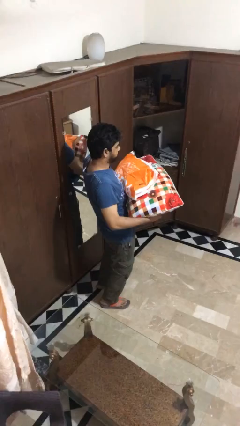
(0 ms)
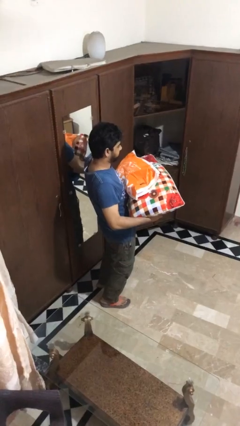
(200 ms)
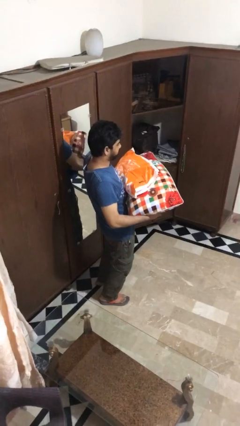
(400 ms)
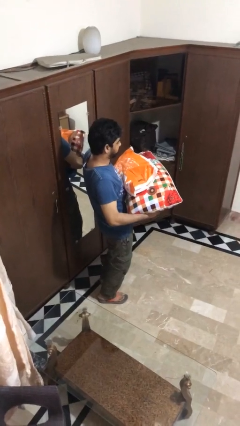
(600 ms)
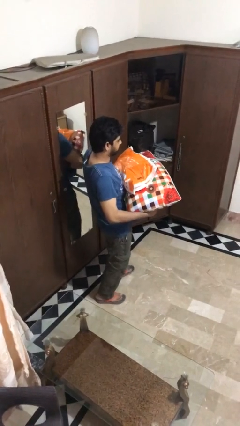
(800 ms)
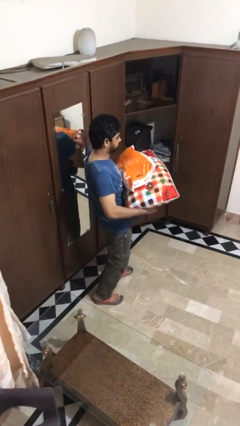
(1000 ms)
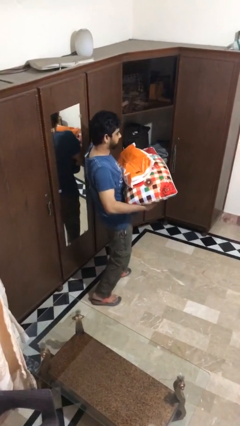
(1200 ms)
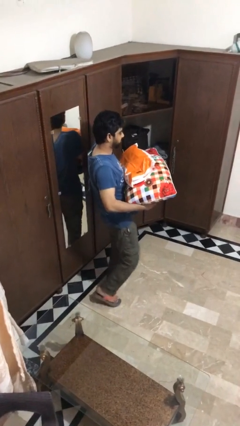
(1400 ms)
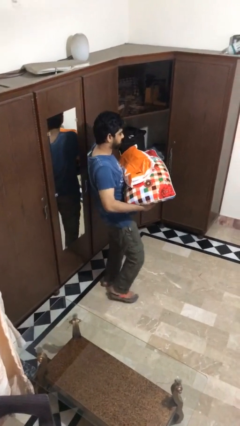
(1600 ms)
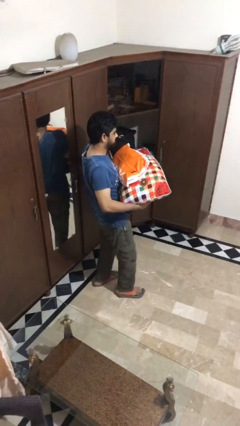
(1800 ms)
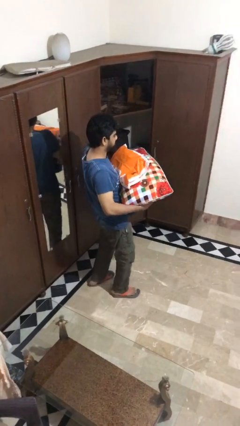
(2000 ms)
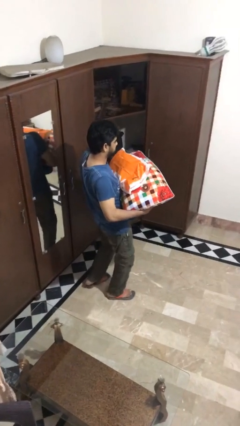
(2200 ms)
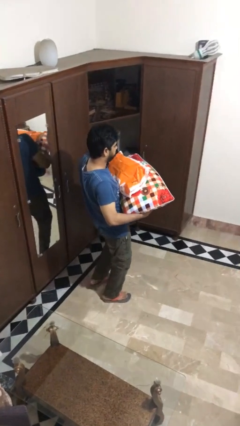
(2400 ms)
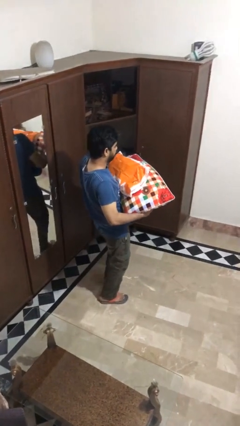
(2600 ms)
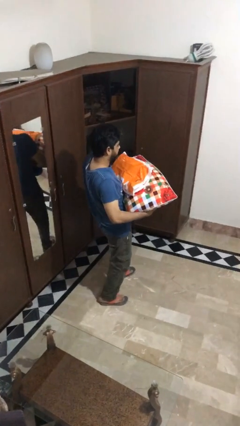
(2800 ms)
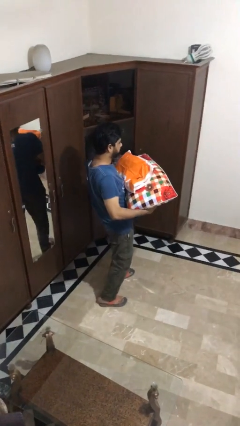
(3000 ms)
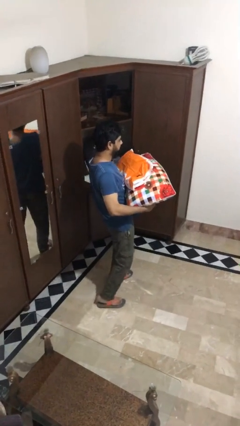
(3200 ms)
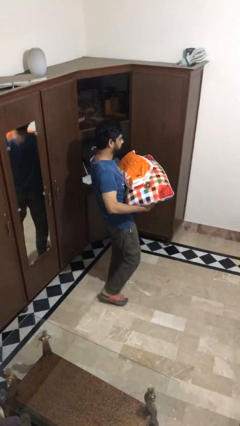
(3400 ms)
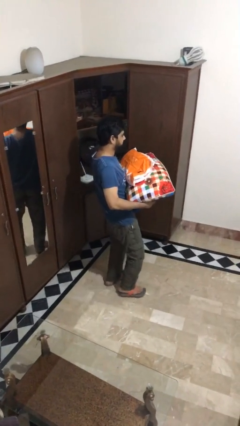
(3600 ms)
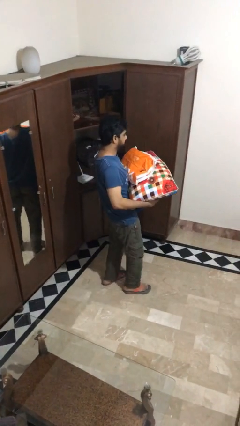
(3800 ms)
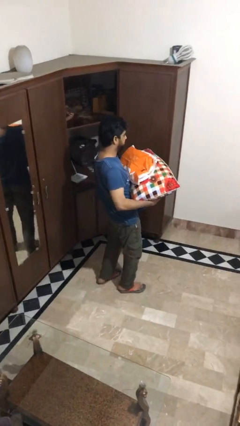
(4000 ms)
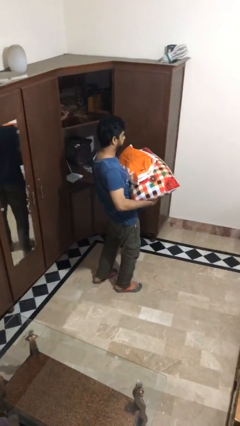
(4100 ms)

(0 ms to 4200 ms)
person carries heavy object

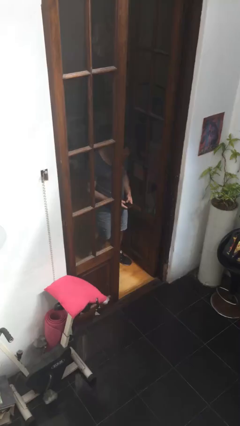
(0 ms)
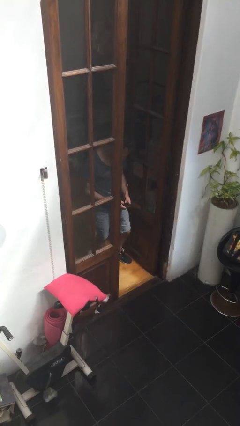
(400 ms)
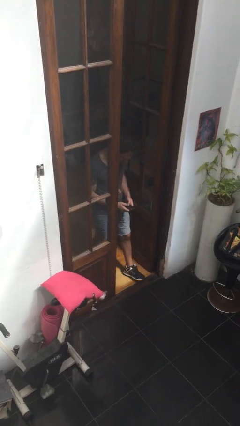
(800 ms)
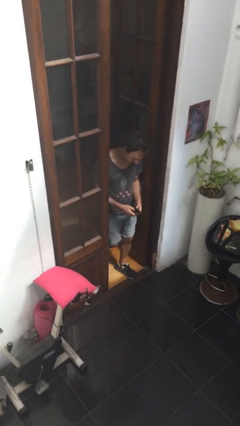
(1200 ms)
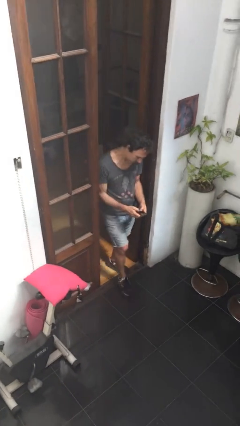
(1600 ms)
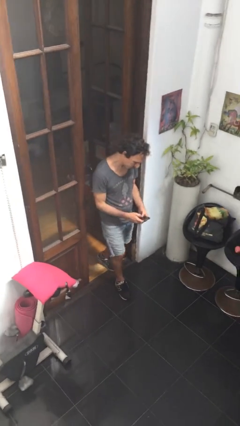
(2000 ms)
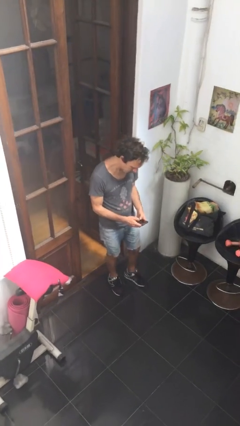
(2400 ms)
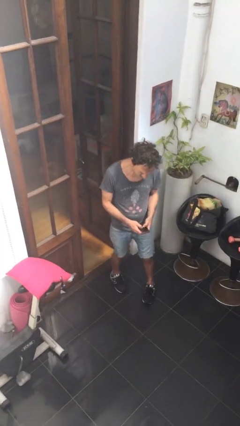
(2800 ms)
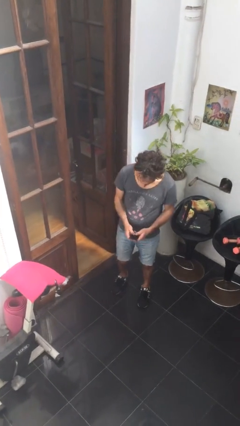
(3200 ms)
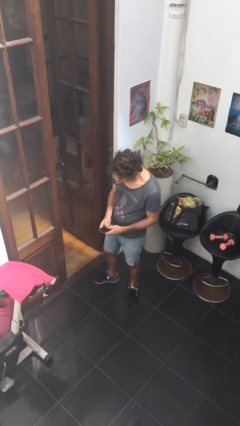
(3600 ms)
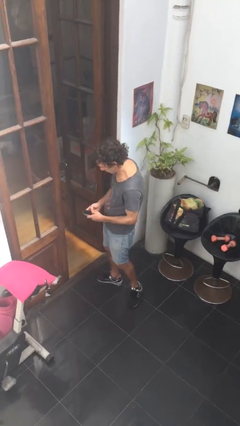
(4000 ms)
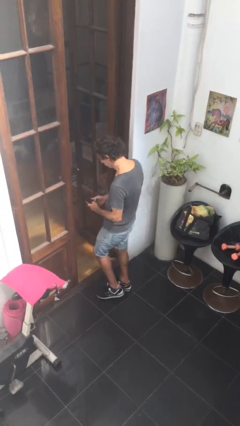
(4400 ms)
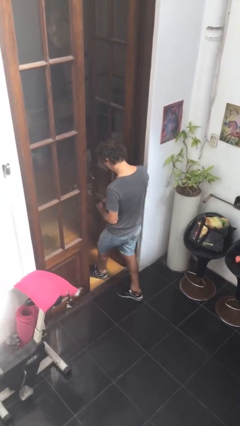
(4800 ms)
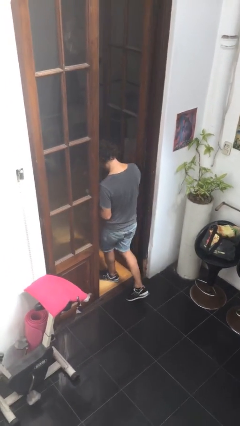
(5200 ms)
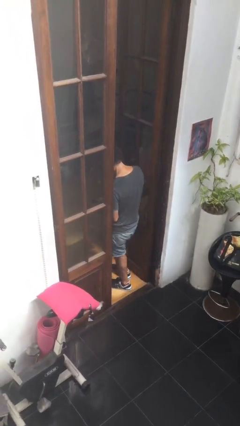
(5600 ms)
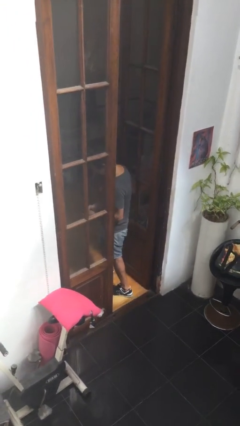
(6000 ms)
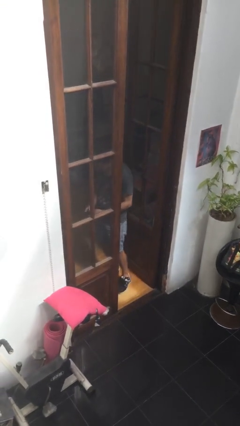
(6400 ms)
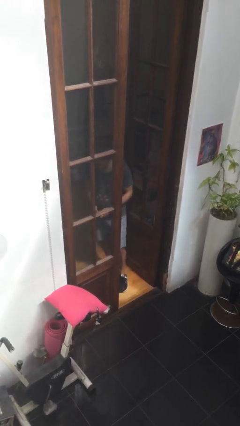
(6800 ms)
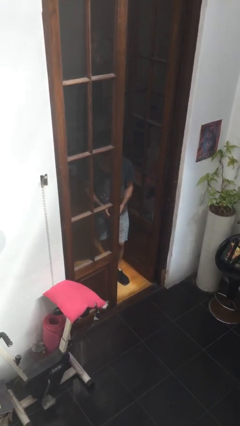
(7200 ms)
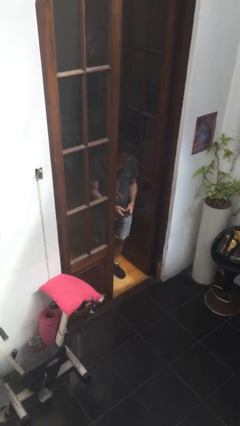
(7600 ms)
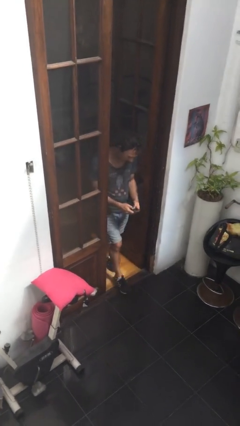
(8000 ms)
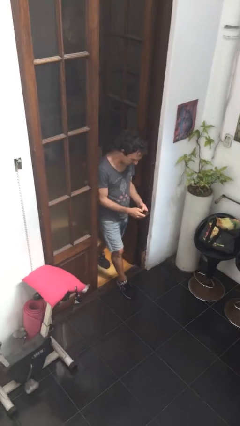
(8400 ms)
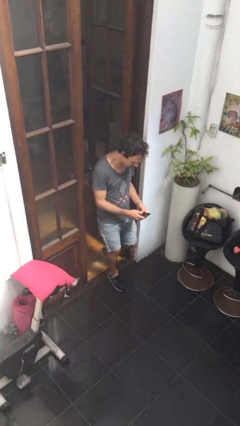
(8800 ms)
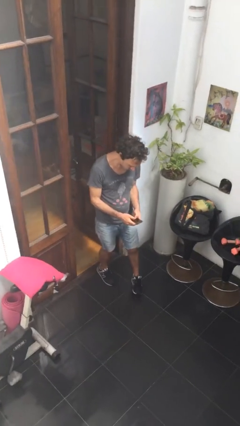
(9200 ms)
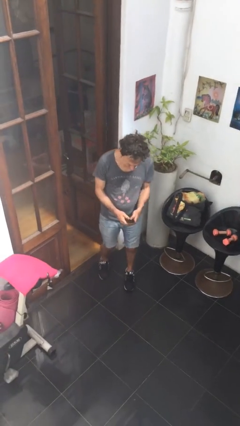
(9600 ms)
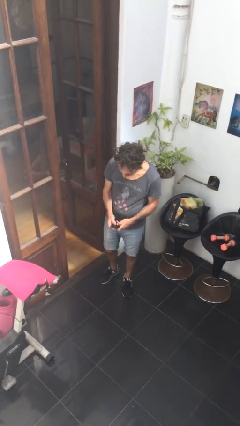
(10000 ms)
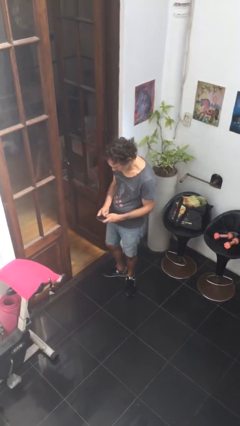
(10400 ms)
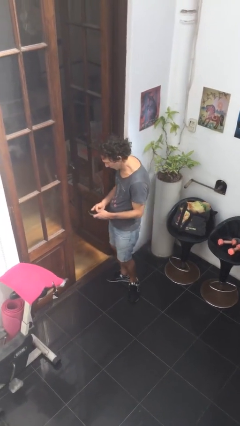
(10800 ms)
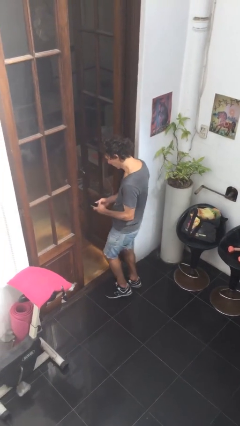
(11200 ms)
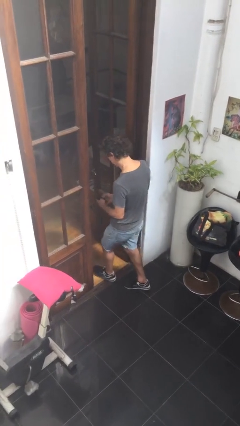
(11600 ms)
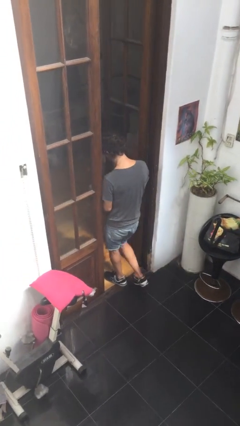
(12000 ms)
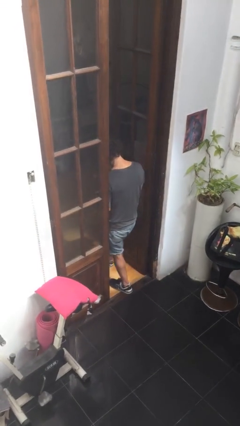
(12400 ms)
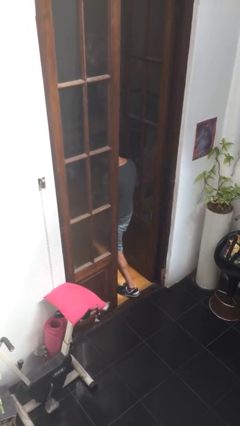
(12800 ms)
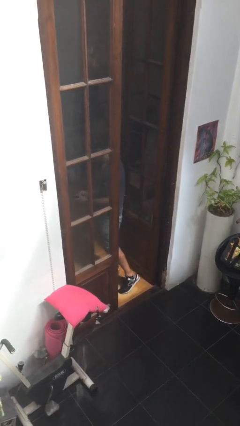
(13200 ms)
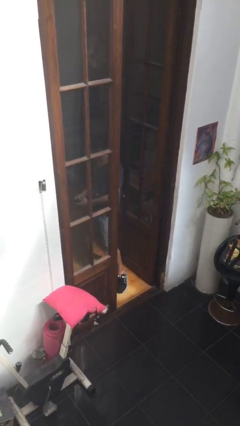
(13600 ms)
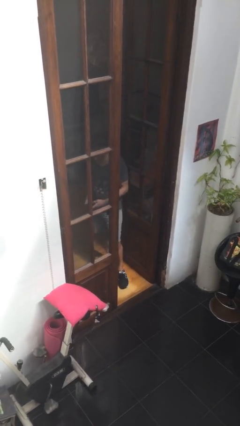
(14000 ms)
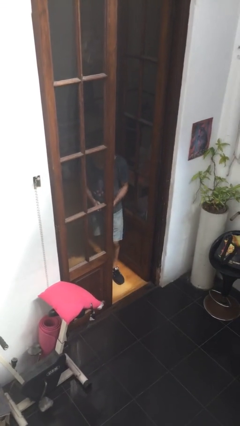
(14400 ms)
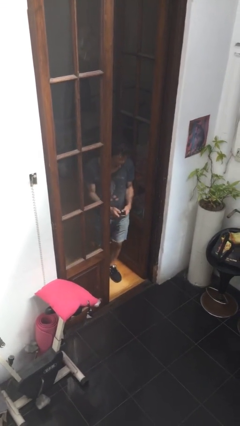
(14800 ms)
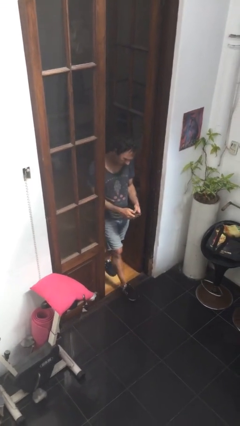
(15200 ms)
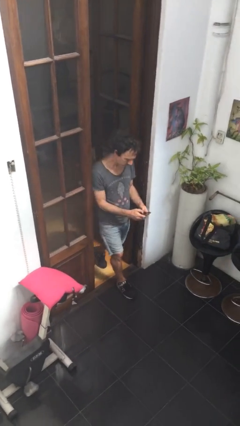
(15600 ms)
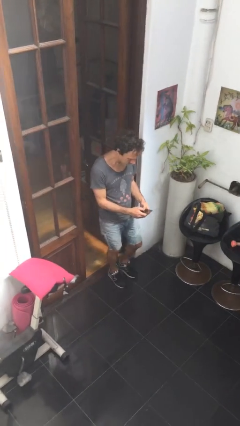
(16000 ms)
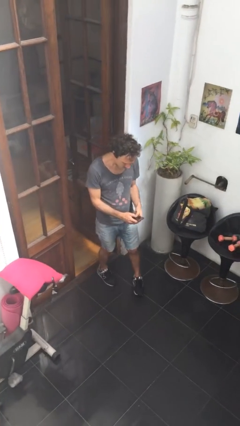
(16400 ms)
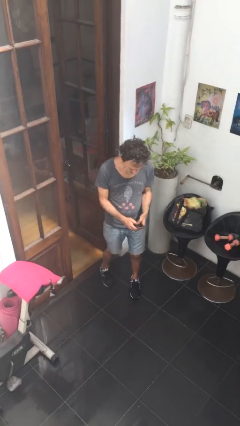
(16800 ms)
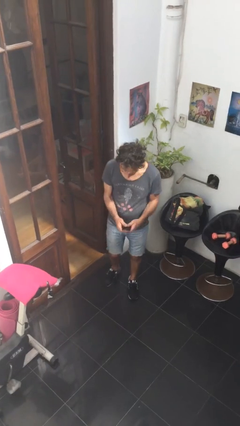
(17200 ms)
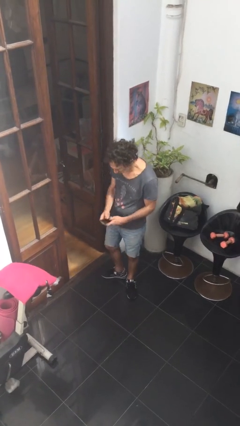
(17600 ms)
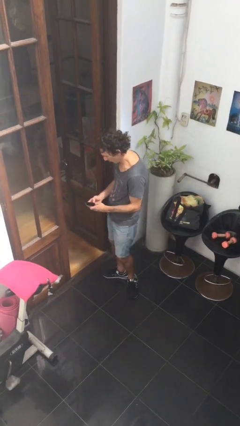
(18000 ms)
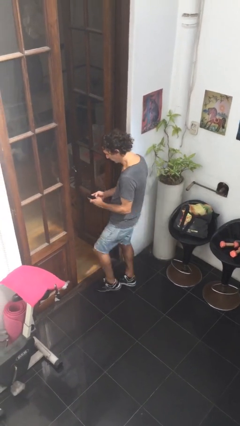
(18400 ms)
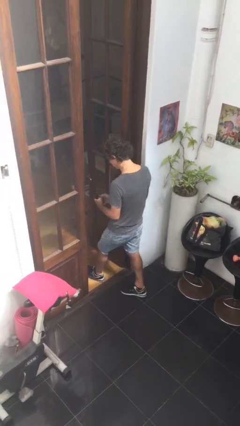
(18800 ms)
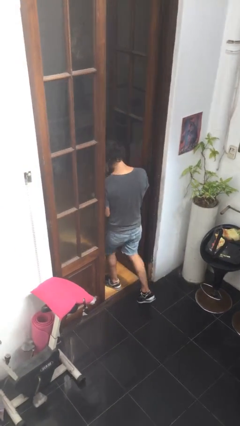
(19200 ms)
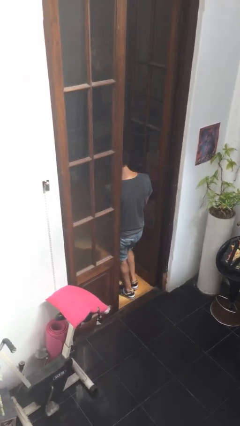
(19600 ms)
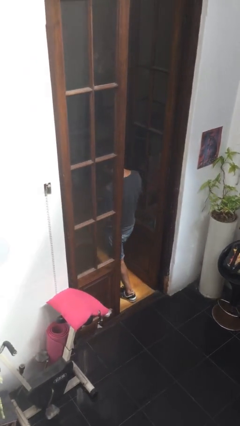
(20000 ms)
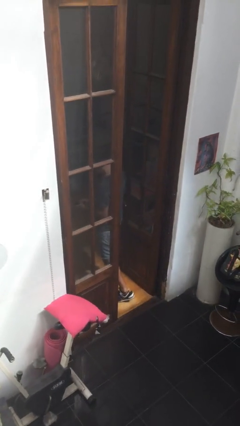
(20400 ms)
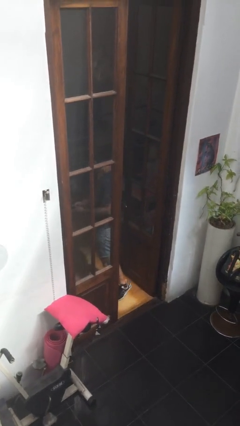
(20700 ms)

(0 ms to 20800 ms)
person texts on phone

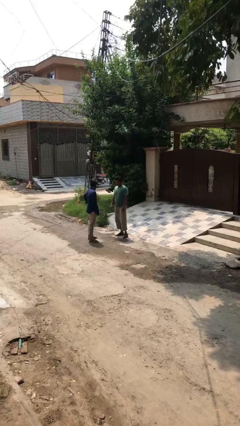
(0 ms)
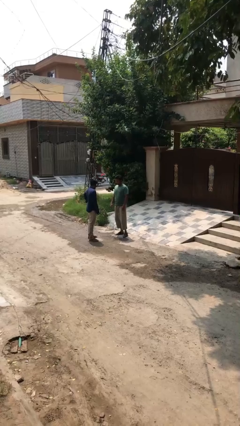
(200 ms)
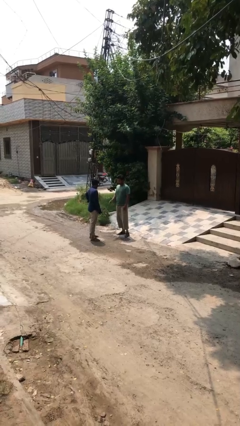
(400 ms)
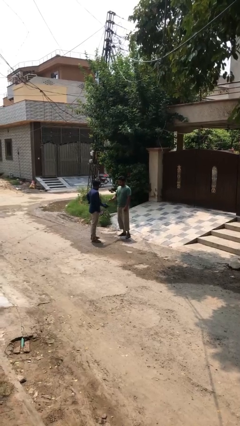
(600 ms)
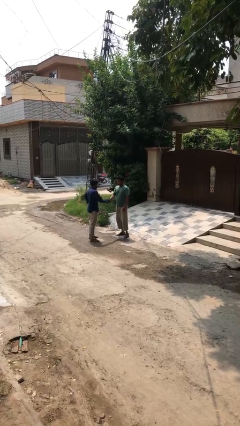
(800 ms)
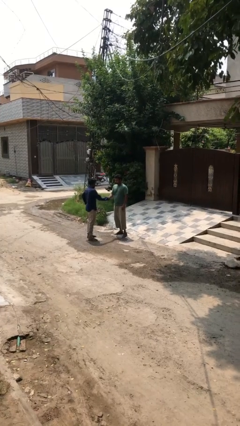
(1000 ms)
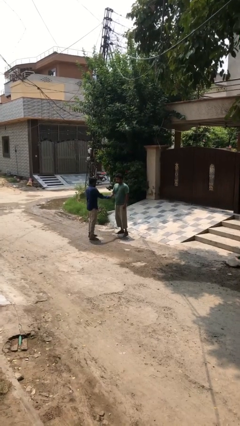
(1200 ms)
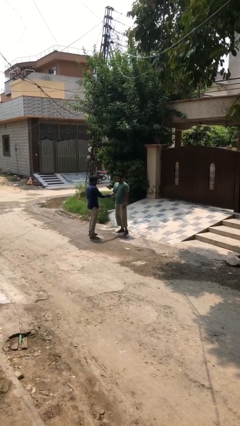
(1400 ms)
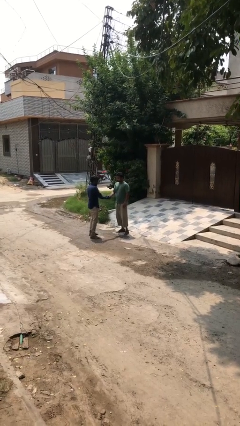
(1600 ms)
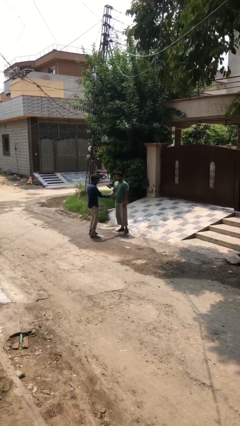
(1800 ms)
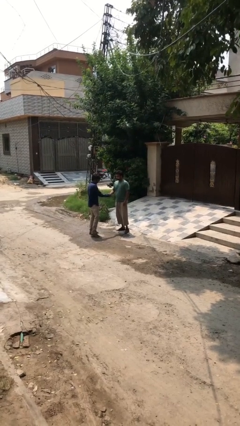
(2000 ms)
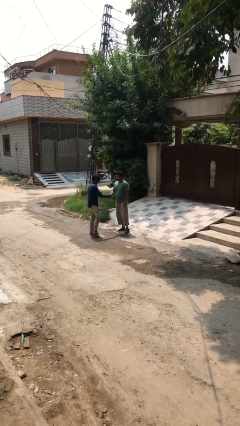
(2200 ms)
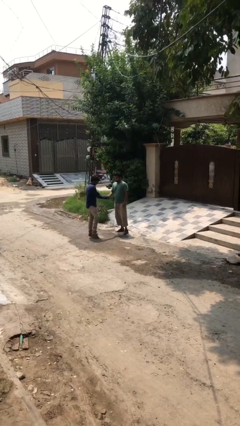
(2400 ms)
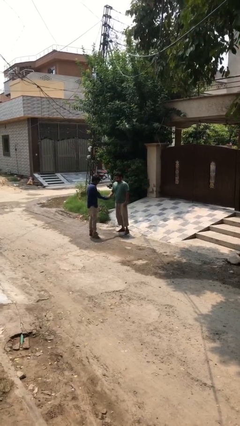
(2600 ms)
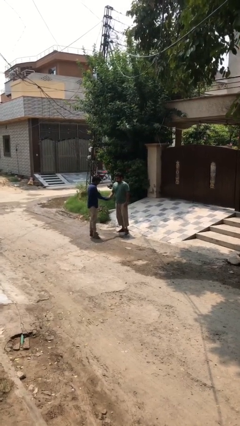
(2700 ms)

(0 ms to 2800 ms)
person shakes hand

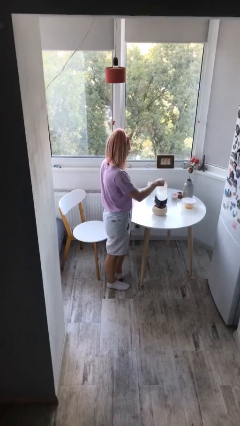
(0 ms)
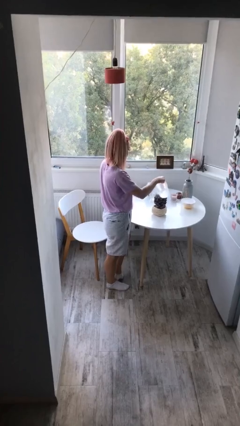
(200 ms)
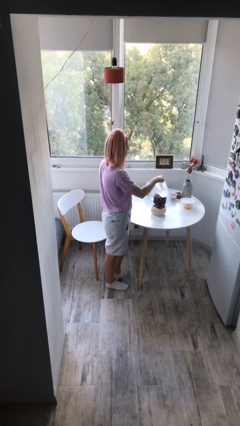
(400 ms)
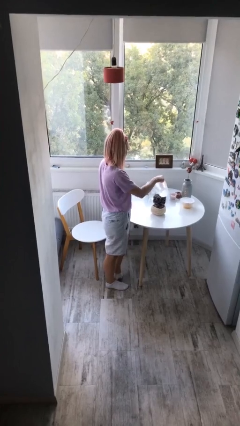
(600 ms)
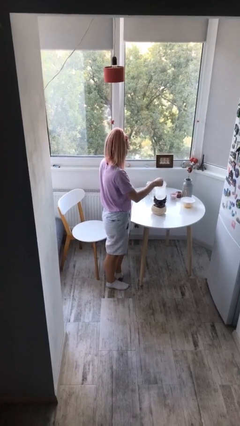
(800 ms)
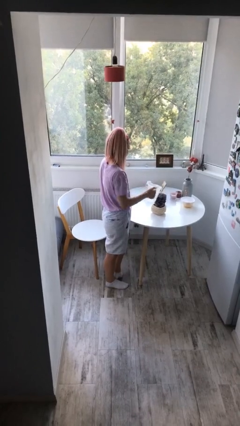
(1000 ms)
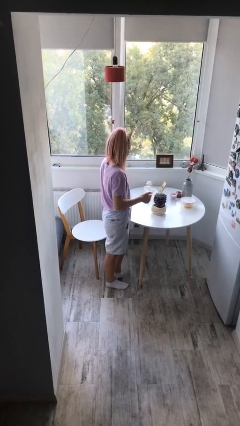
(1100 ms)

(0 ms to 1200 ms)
person waters houseplant
